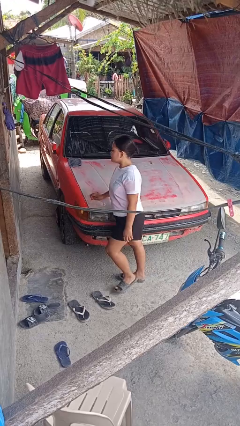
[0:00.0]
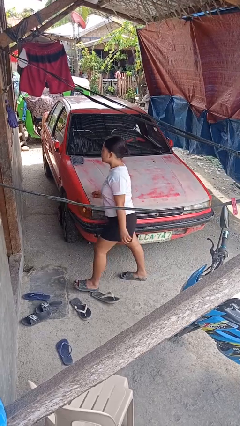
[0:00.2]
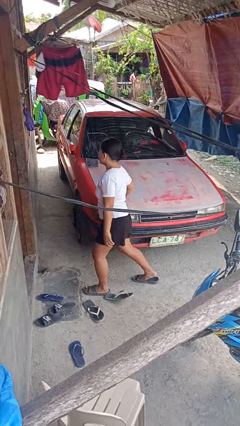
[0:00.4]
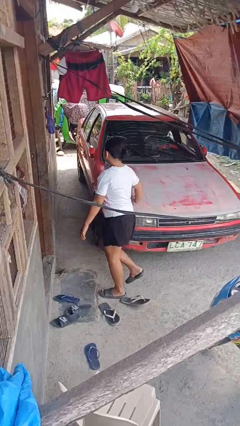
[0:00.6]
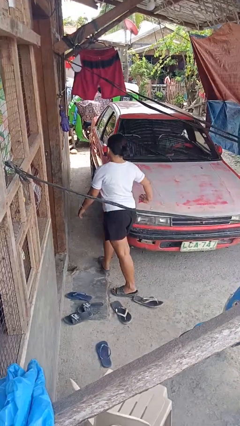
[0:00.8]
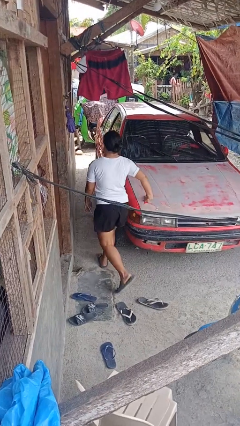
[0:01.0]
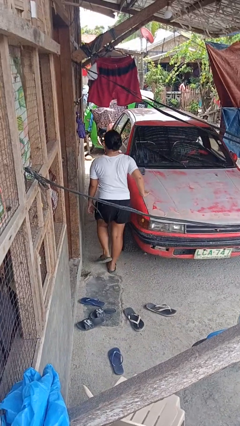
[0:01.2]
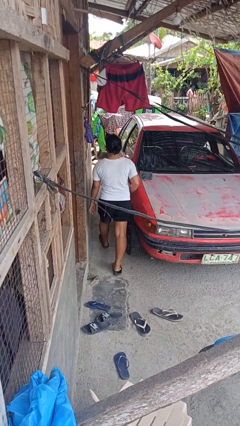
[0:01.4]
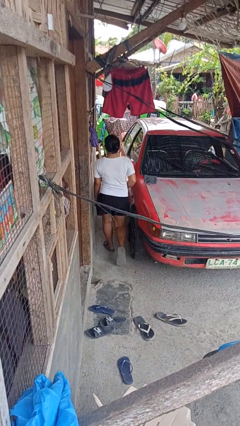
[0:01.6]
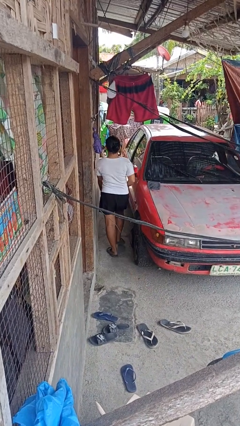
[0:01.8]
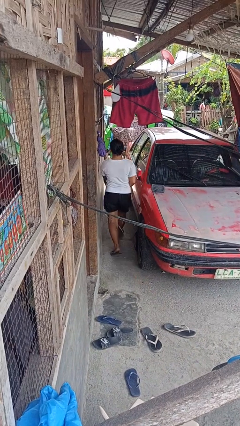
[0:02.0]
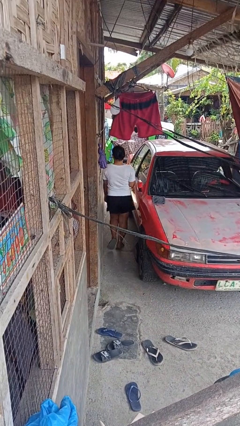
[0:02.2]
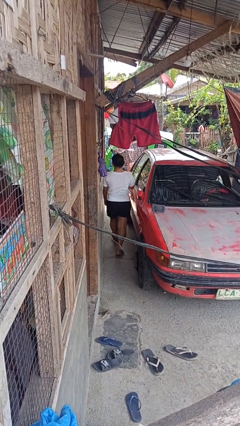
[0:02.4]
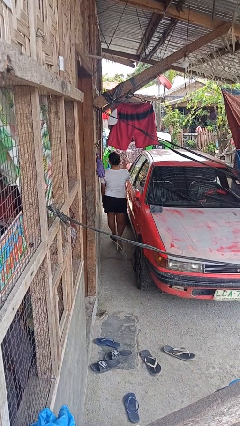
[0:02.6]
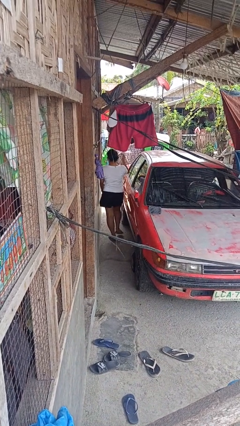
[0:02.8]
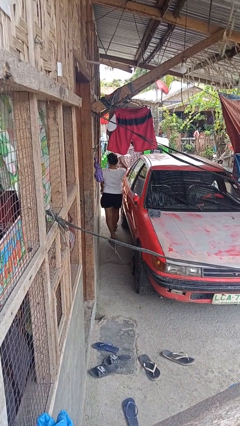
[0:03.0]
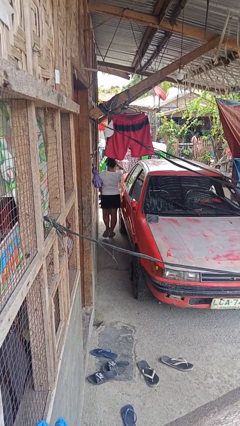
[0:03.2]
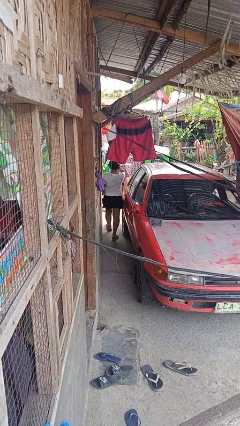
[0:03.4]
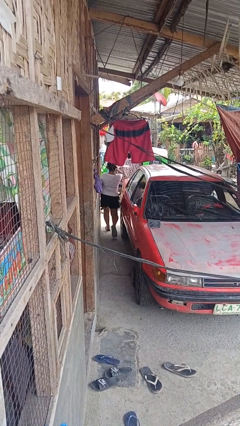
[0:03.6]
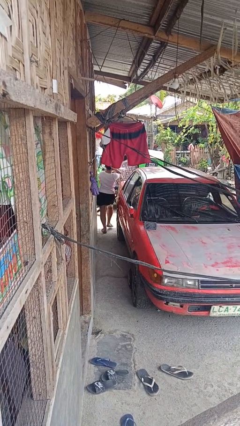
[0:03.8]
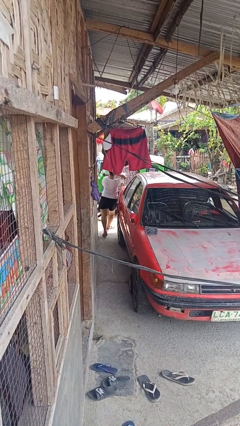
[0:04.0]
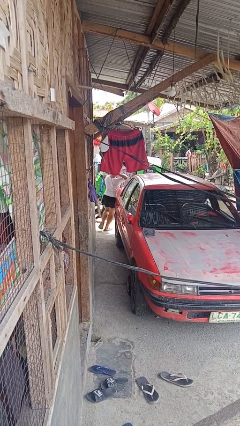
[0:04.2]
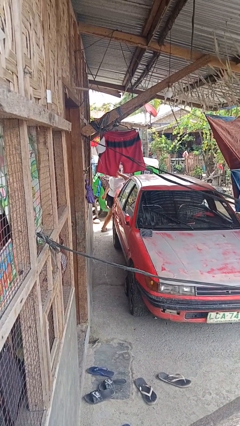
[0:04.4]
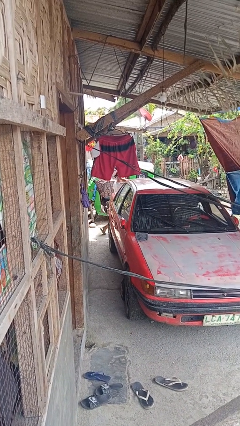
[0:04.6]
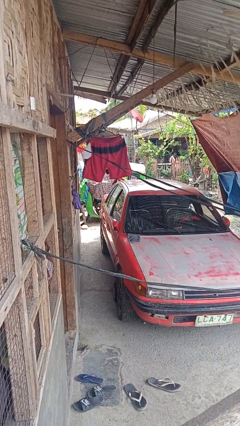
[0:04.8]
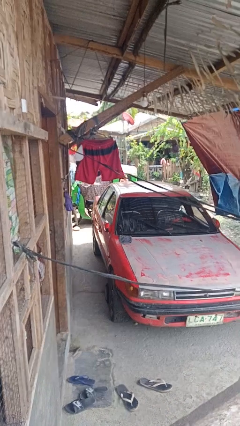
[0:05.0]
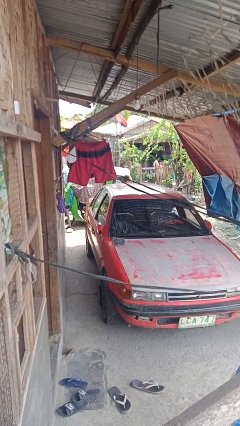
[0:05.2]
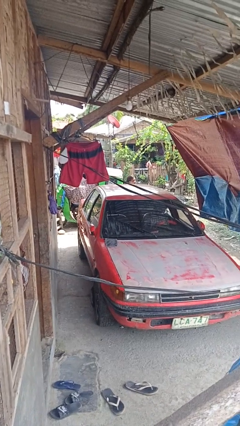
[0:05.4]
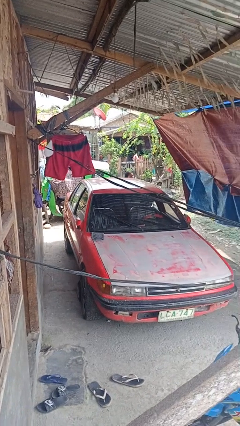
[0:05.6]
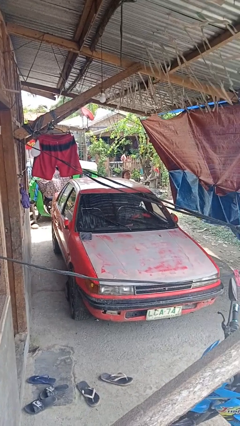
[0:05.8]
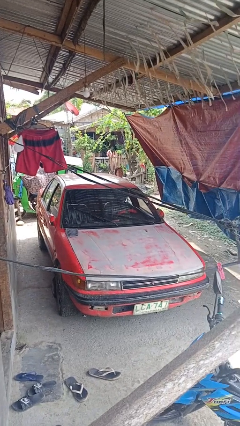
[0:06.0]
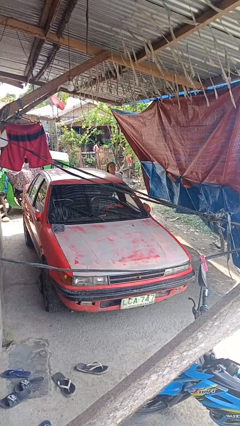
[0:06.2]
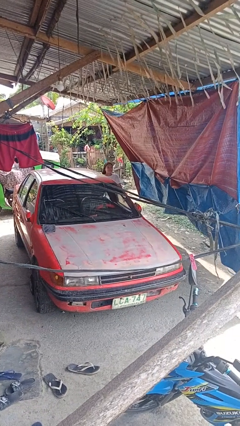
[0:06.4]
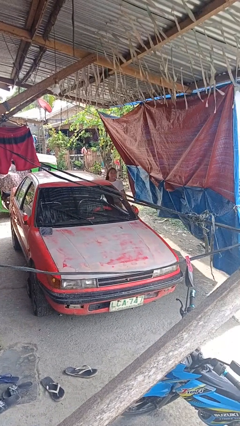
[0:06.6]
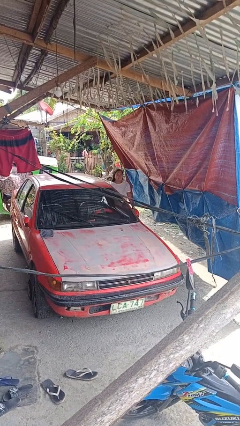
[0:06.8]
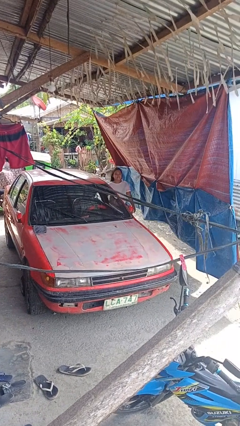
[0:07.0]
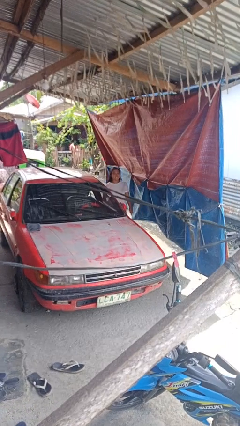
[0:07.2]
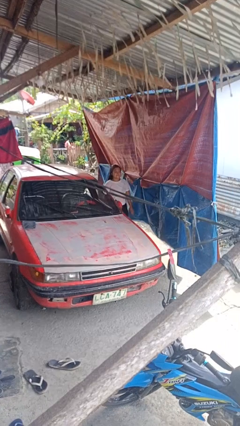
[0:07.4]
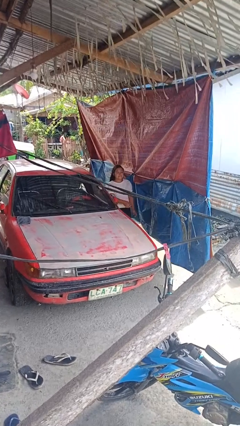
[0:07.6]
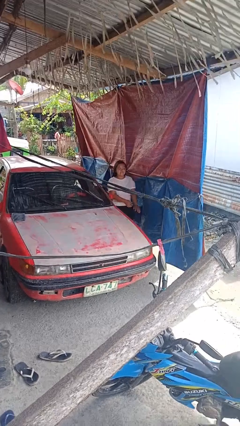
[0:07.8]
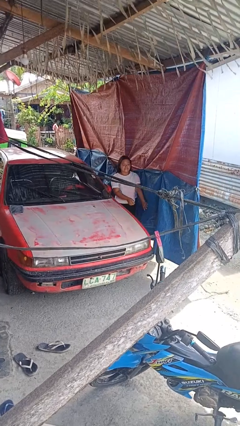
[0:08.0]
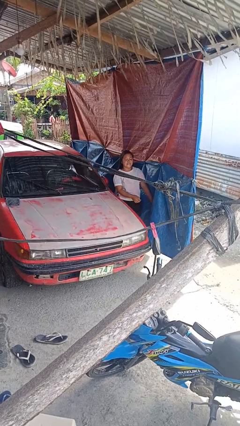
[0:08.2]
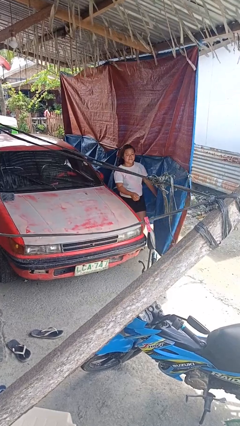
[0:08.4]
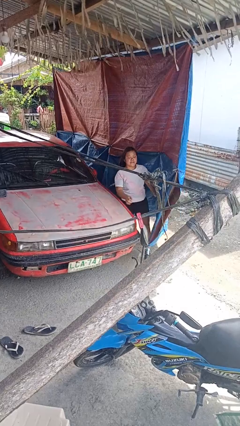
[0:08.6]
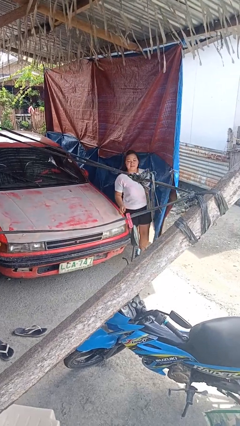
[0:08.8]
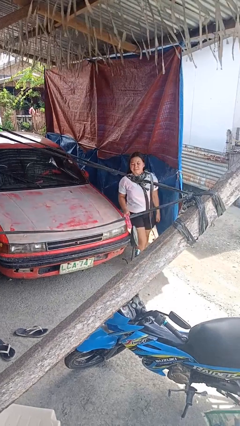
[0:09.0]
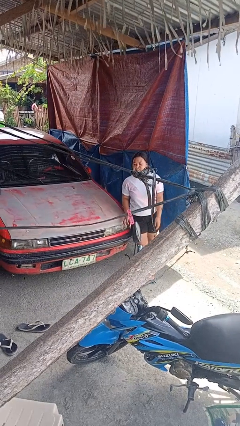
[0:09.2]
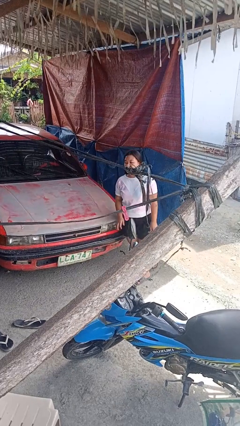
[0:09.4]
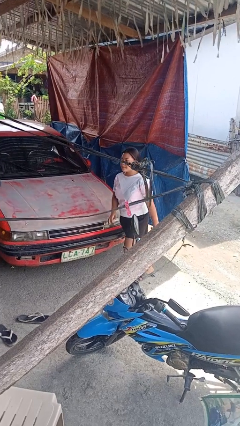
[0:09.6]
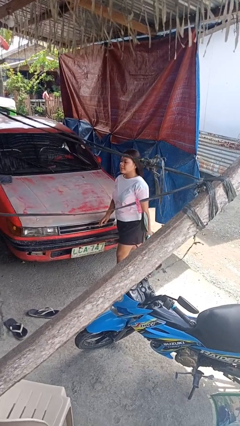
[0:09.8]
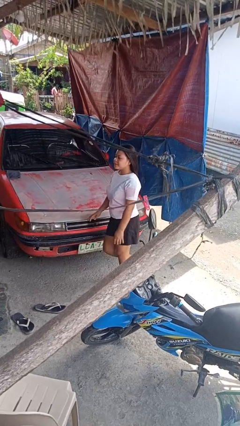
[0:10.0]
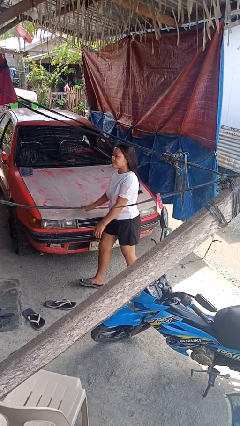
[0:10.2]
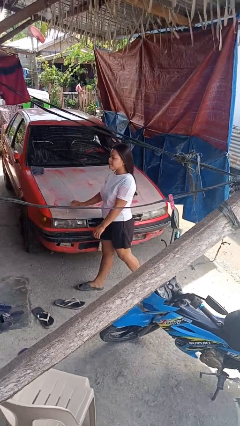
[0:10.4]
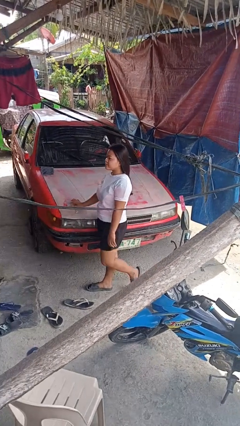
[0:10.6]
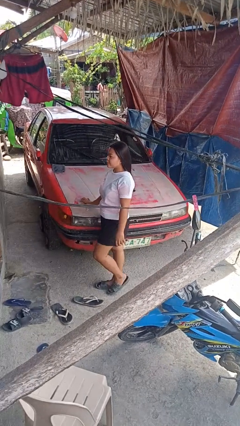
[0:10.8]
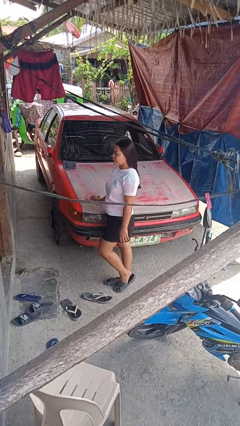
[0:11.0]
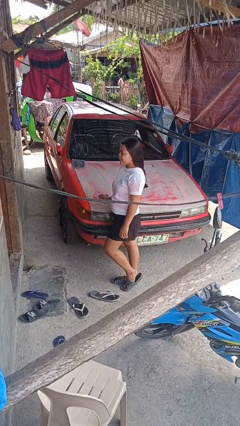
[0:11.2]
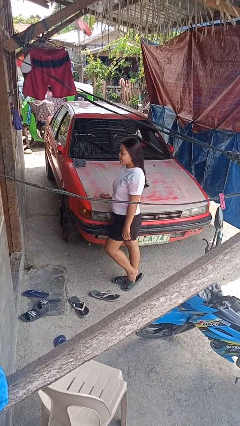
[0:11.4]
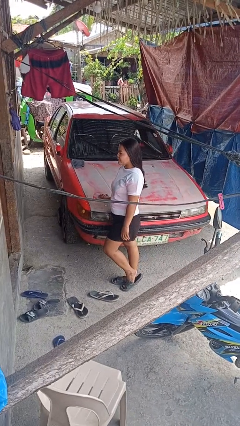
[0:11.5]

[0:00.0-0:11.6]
person walks around car

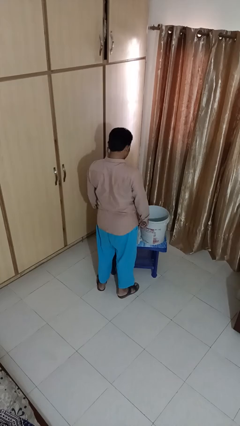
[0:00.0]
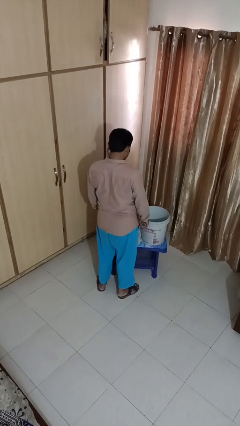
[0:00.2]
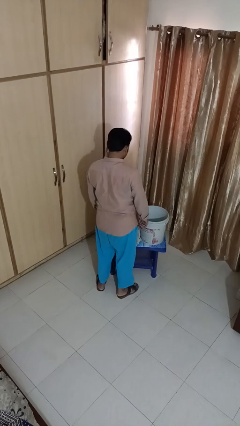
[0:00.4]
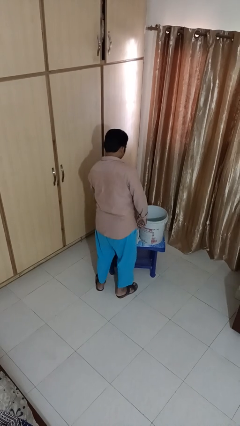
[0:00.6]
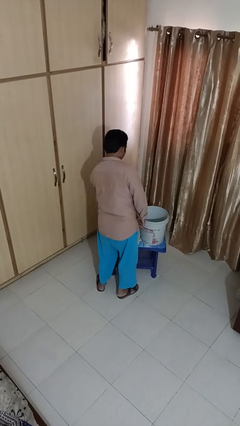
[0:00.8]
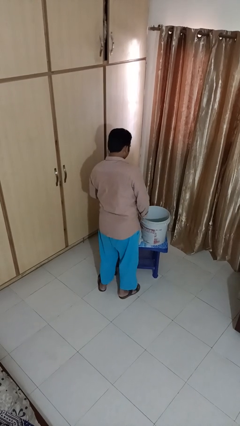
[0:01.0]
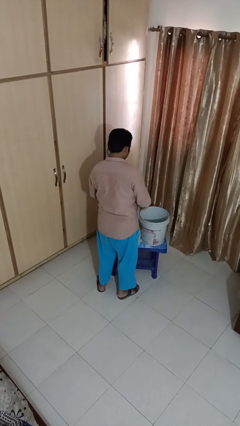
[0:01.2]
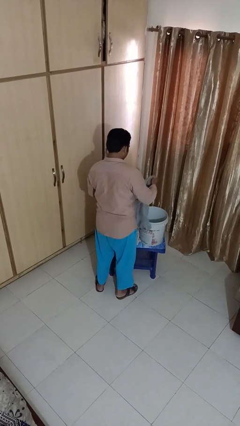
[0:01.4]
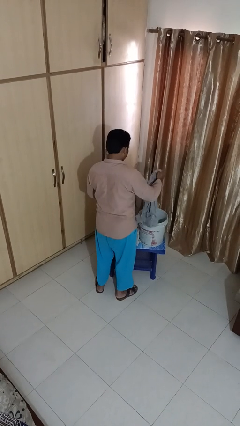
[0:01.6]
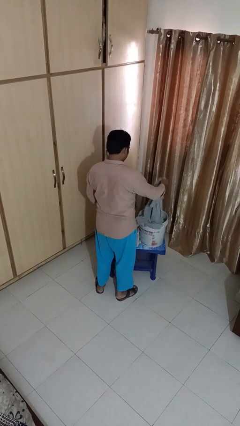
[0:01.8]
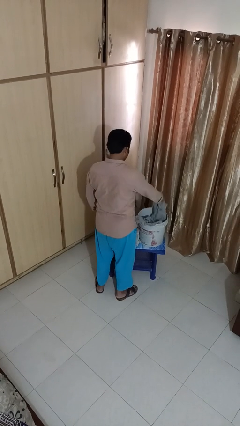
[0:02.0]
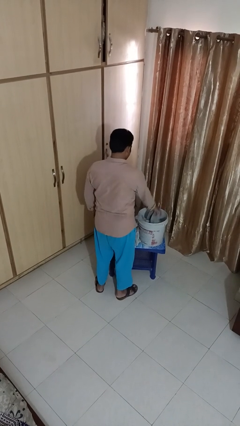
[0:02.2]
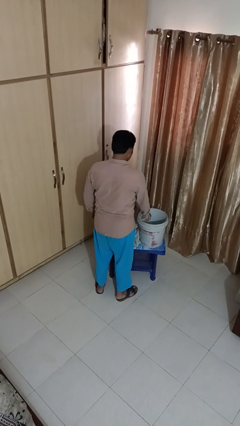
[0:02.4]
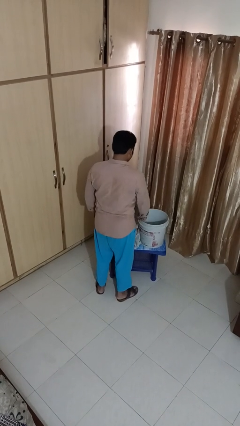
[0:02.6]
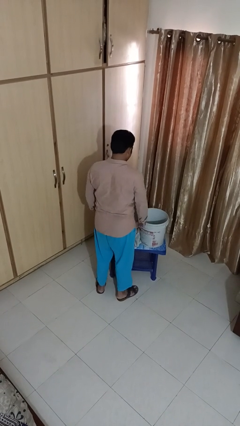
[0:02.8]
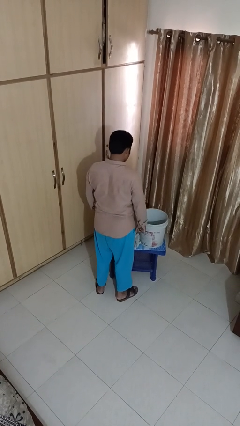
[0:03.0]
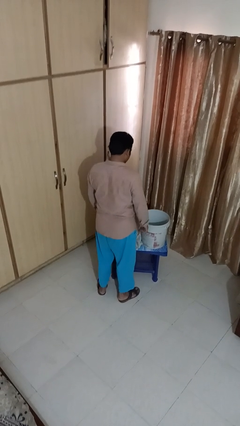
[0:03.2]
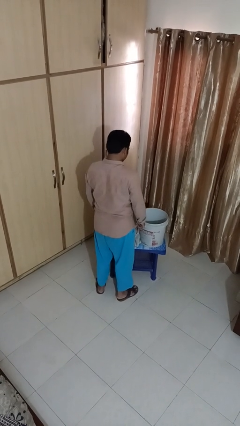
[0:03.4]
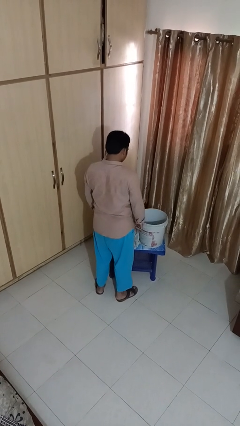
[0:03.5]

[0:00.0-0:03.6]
person puts object into basket

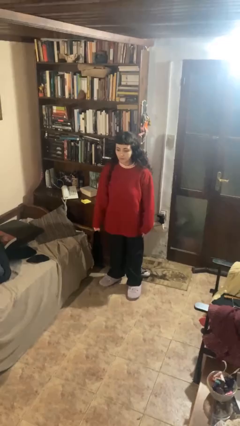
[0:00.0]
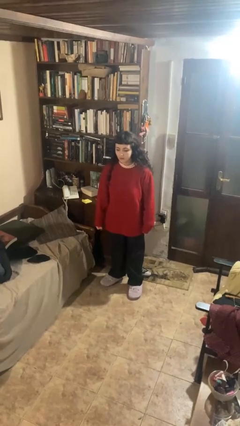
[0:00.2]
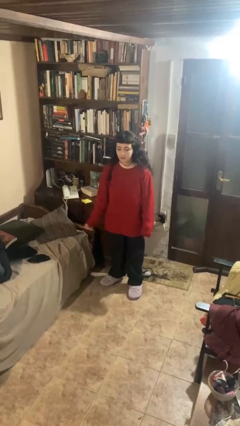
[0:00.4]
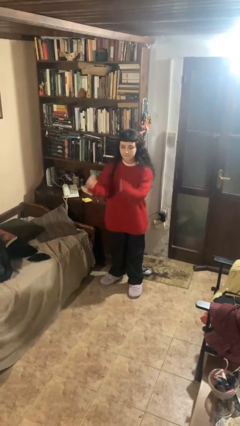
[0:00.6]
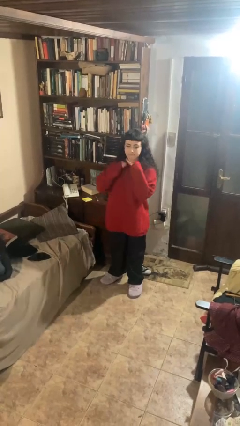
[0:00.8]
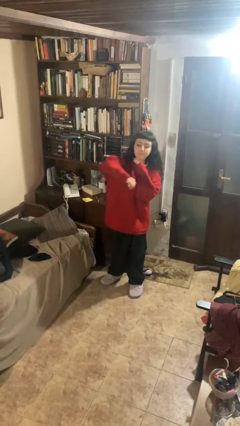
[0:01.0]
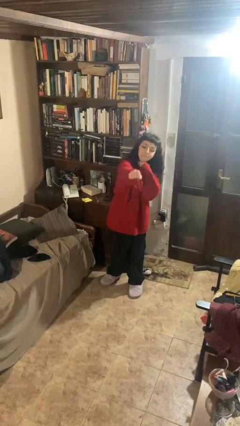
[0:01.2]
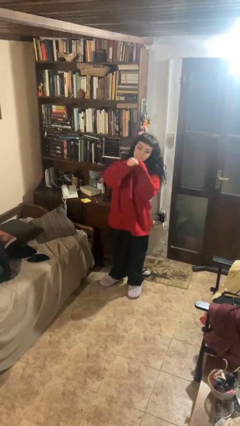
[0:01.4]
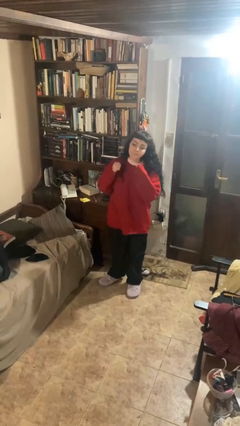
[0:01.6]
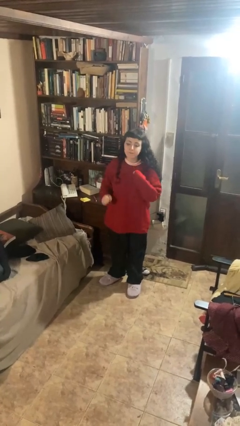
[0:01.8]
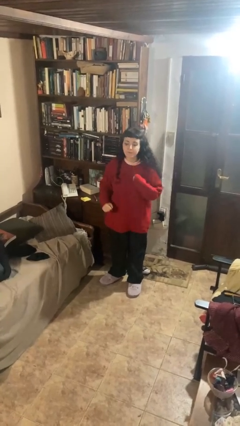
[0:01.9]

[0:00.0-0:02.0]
person punches

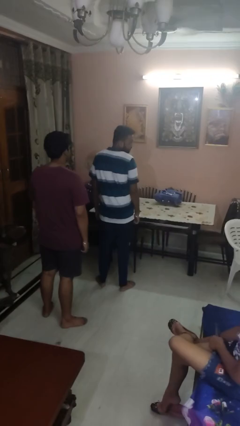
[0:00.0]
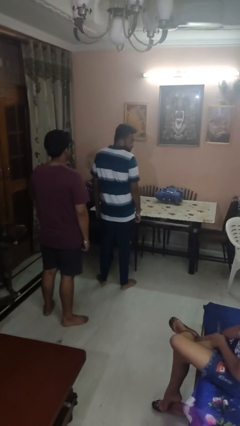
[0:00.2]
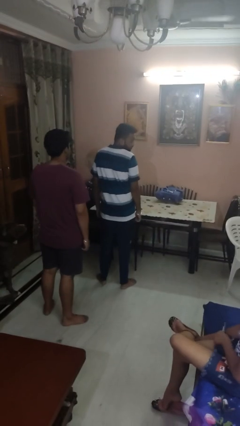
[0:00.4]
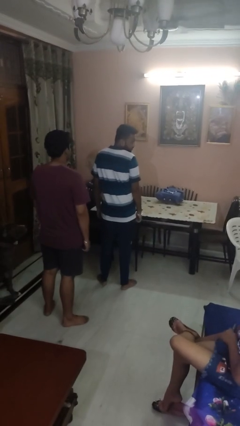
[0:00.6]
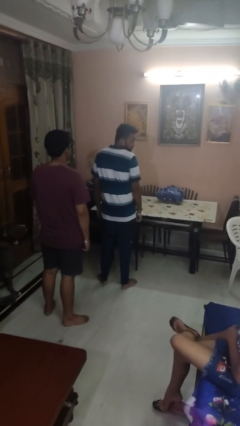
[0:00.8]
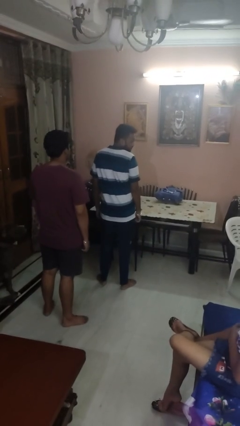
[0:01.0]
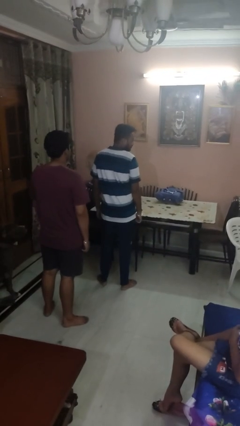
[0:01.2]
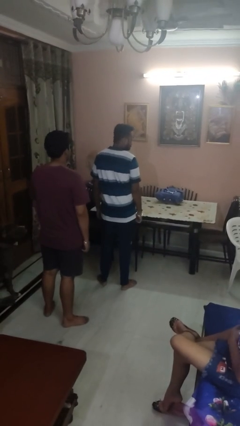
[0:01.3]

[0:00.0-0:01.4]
person looks over shoulder
